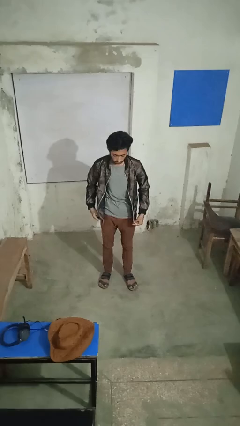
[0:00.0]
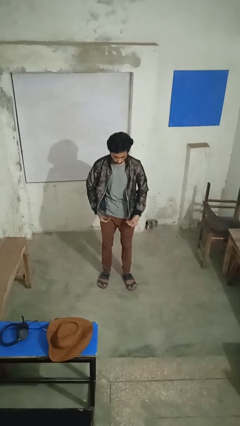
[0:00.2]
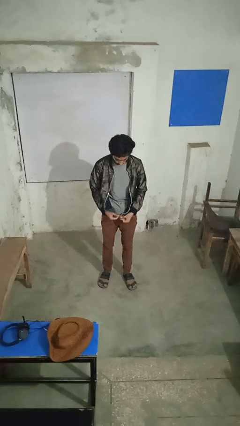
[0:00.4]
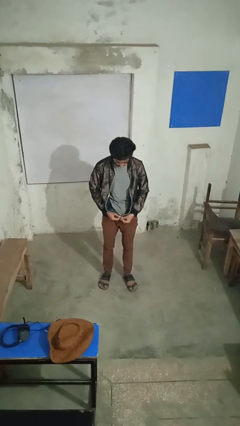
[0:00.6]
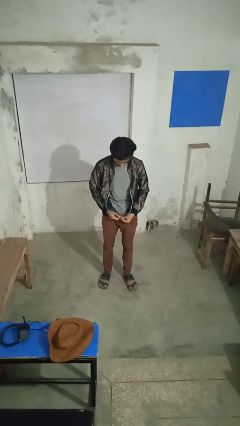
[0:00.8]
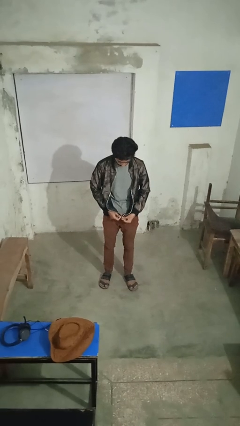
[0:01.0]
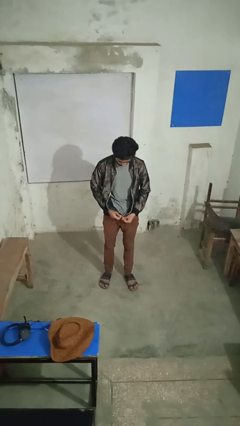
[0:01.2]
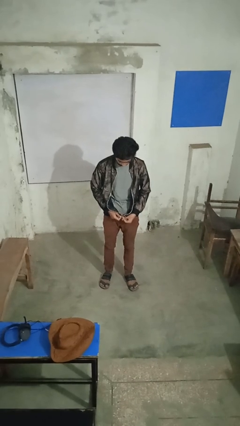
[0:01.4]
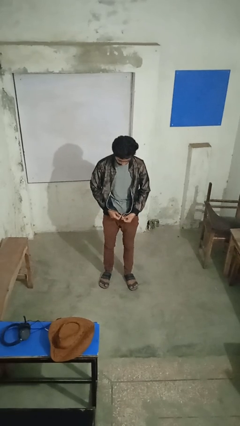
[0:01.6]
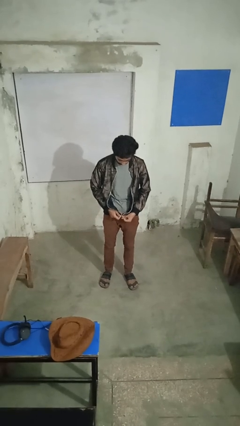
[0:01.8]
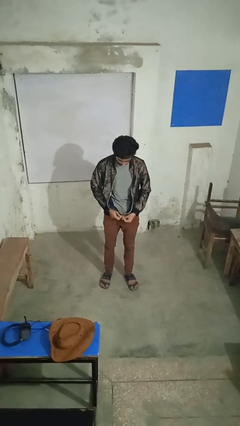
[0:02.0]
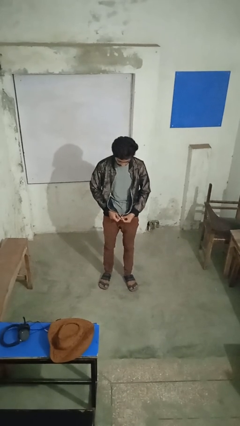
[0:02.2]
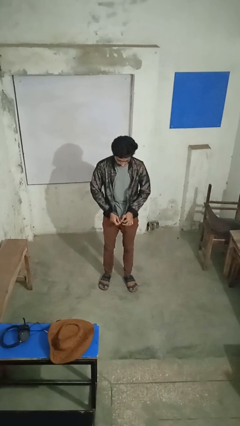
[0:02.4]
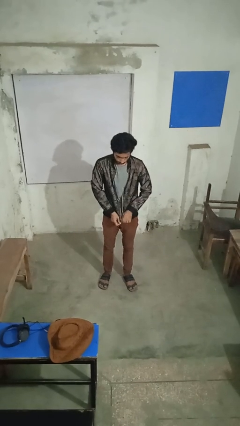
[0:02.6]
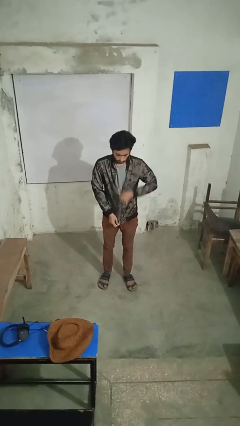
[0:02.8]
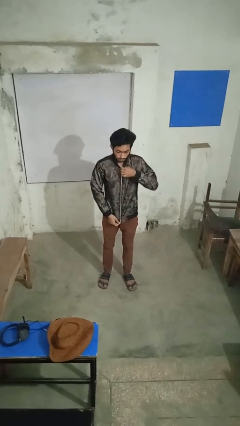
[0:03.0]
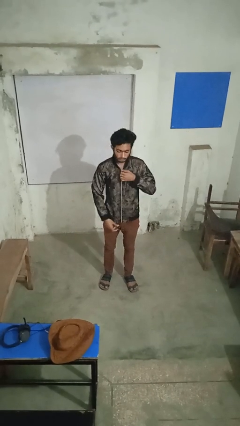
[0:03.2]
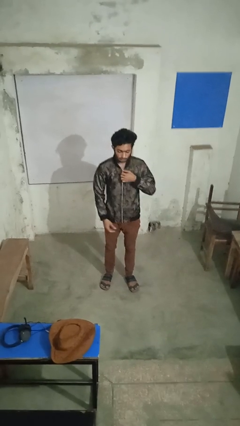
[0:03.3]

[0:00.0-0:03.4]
person zips up jacket

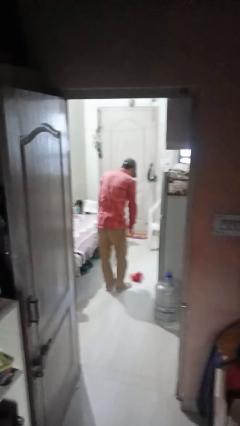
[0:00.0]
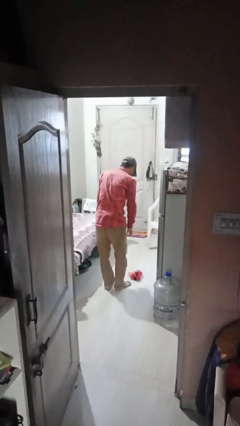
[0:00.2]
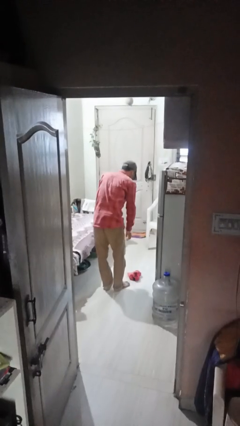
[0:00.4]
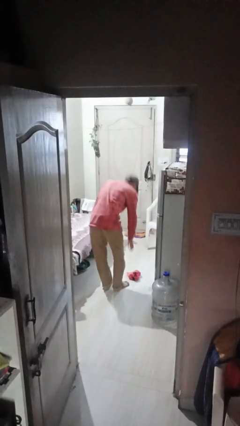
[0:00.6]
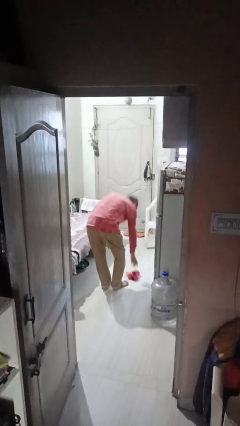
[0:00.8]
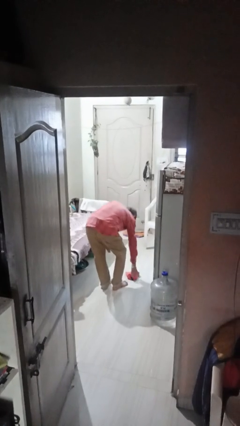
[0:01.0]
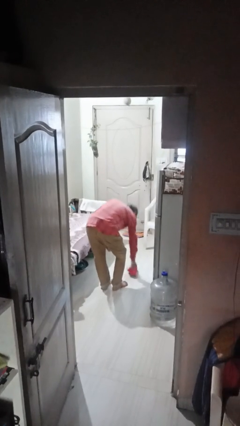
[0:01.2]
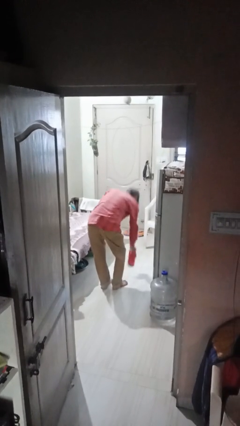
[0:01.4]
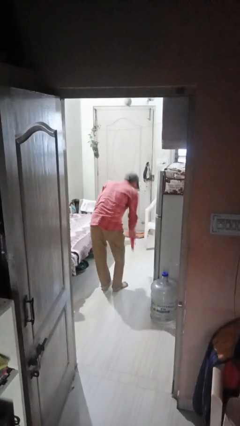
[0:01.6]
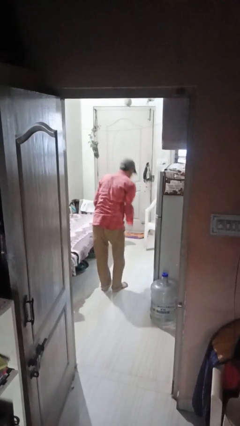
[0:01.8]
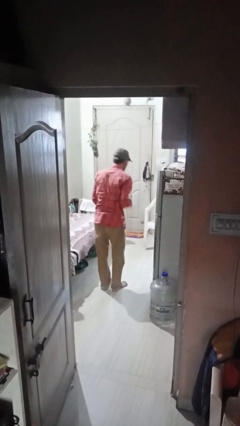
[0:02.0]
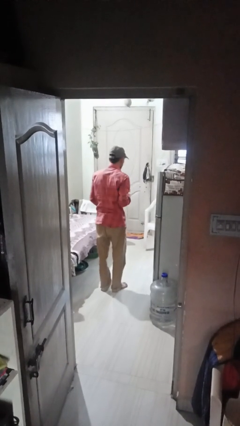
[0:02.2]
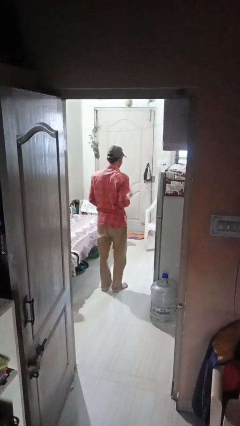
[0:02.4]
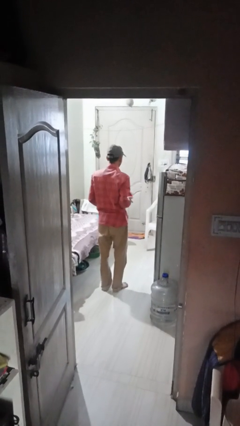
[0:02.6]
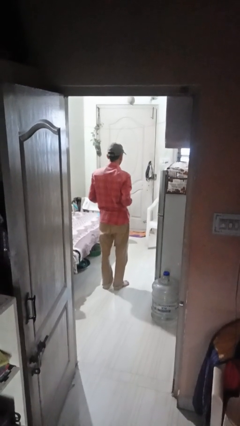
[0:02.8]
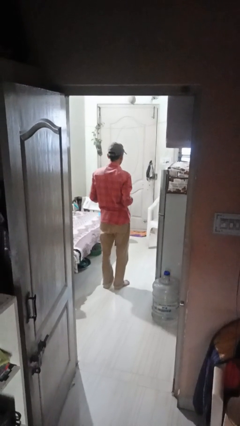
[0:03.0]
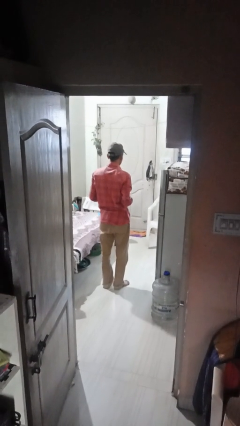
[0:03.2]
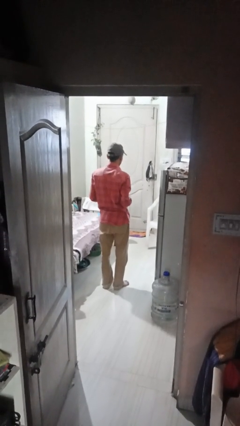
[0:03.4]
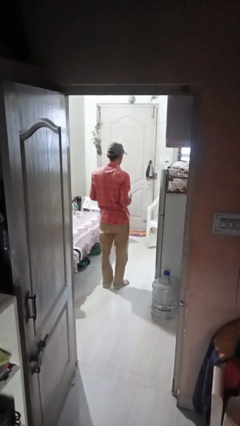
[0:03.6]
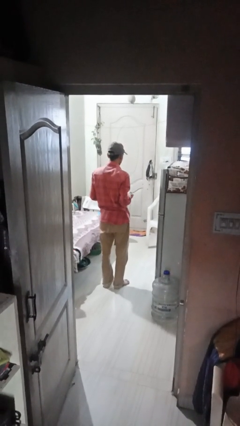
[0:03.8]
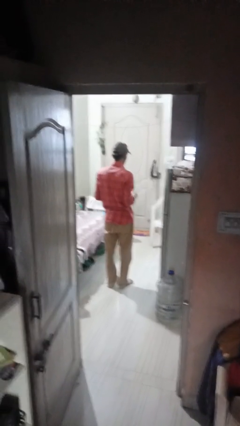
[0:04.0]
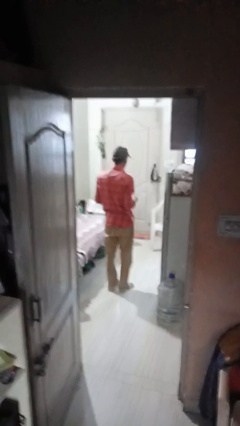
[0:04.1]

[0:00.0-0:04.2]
person picks up object from floor

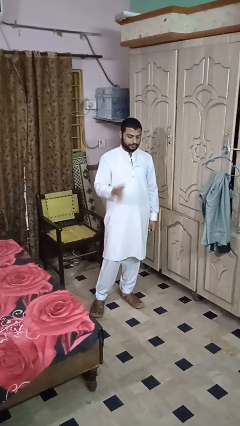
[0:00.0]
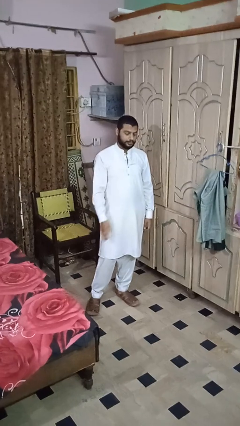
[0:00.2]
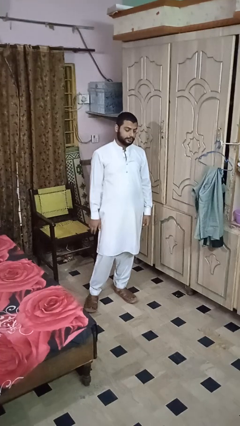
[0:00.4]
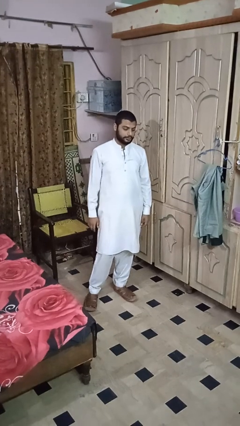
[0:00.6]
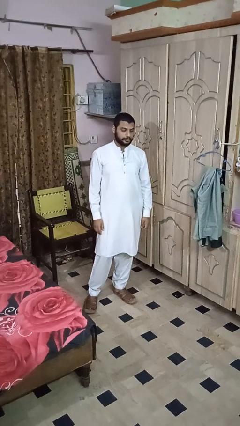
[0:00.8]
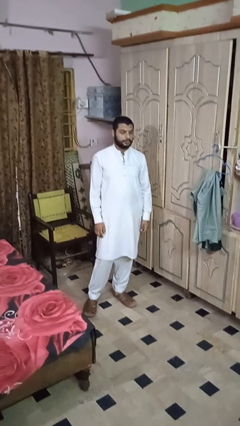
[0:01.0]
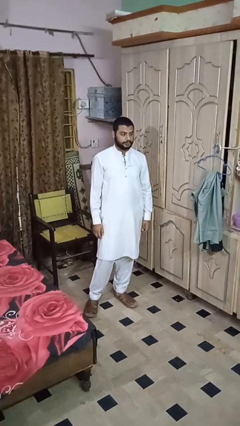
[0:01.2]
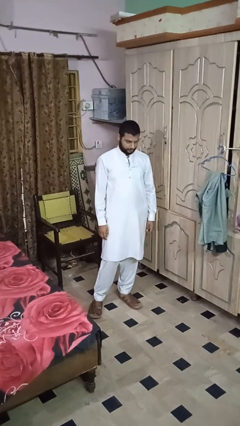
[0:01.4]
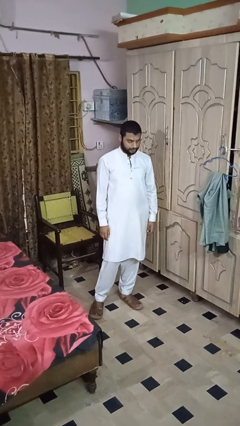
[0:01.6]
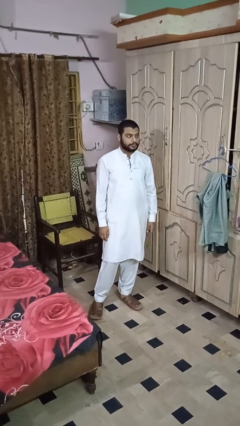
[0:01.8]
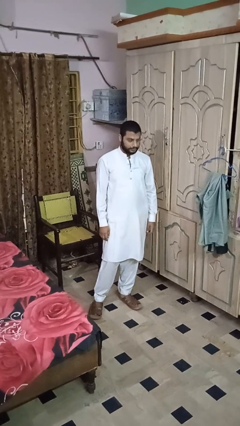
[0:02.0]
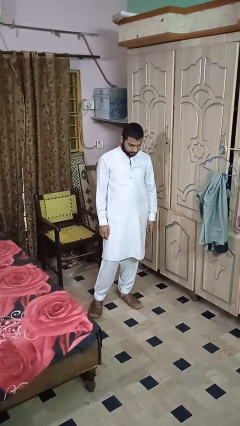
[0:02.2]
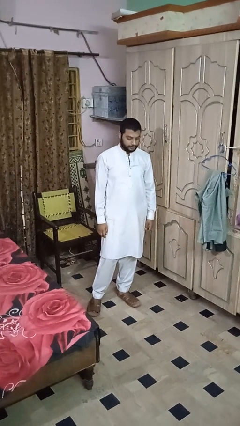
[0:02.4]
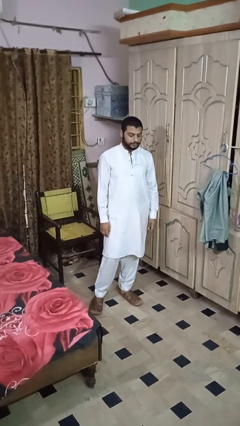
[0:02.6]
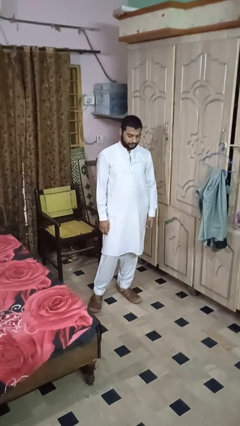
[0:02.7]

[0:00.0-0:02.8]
person nods head

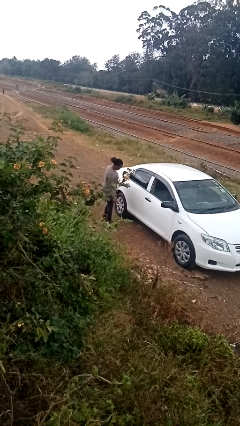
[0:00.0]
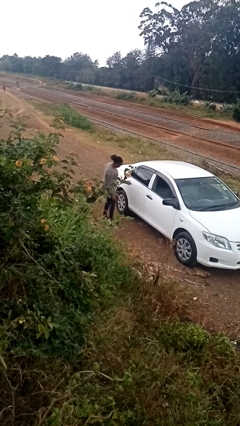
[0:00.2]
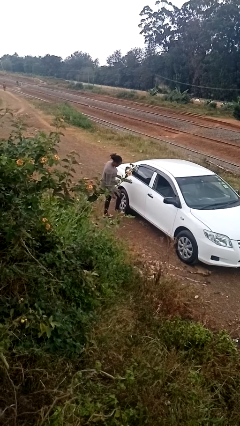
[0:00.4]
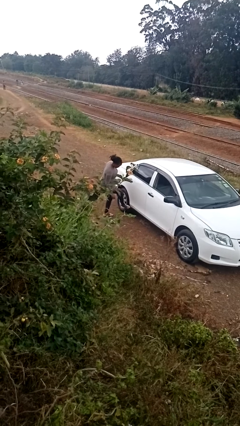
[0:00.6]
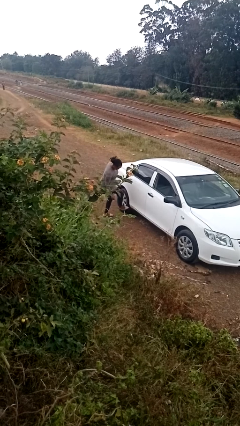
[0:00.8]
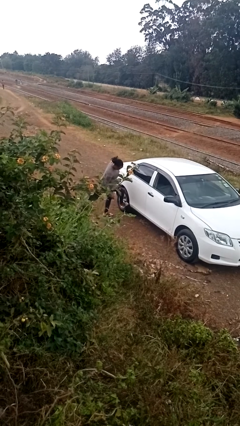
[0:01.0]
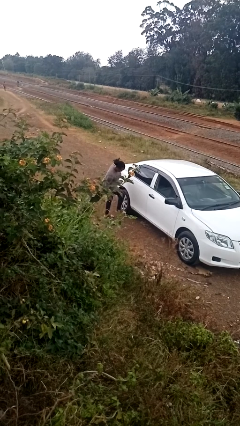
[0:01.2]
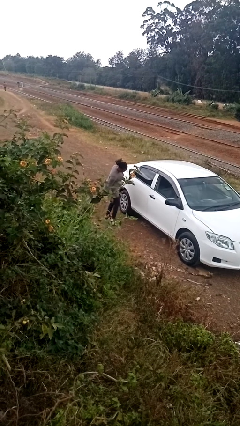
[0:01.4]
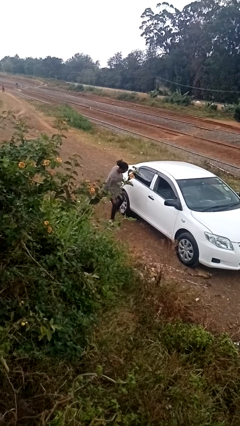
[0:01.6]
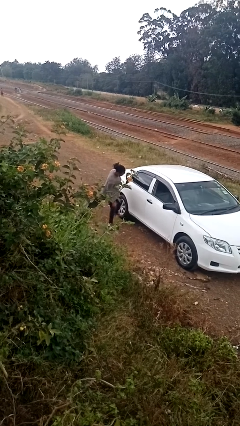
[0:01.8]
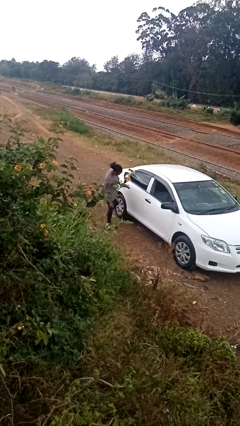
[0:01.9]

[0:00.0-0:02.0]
person kicks car tires

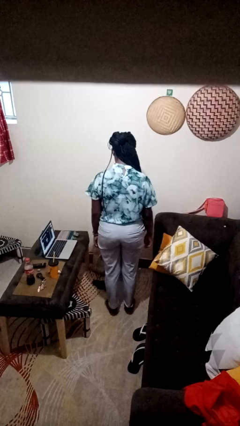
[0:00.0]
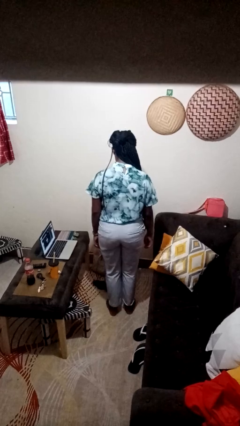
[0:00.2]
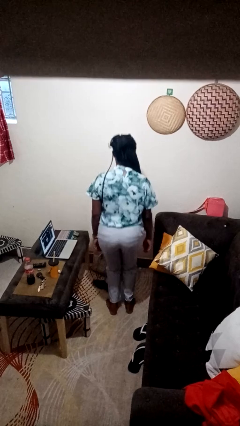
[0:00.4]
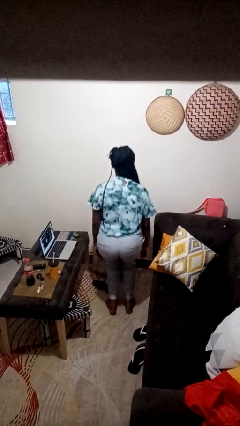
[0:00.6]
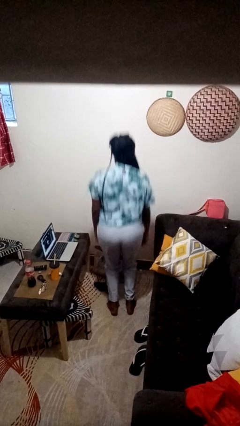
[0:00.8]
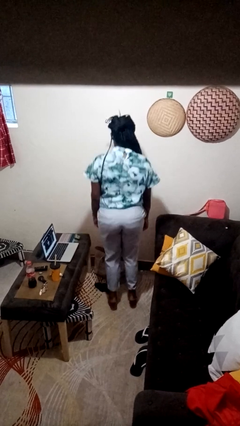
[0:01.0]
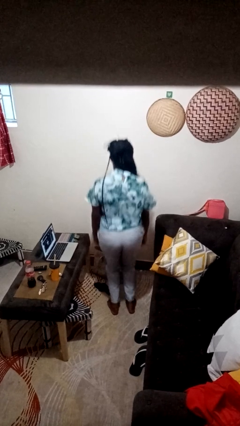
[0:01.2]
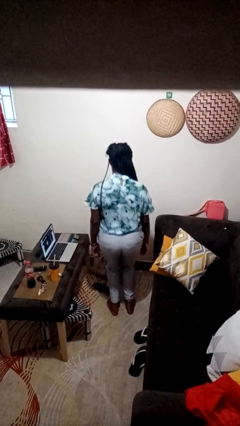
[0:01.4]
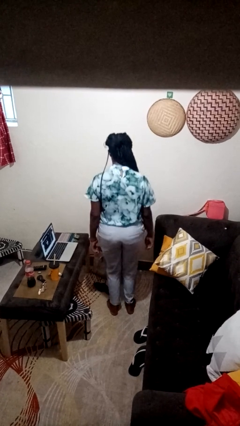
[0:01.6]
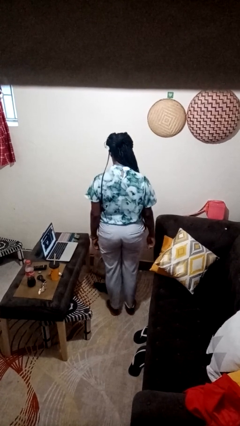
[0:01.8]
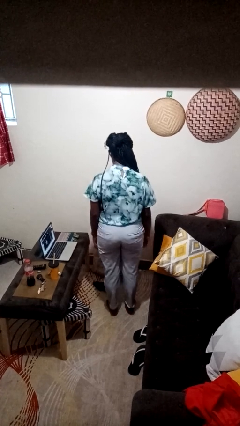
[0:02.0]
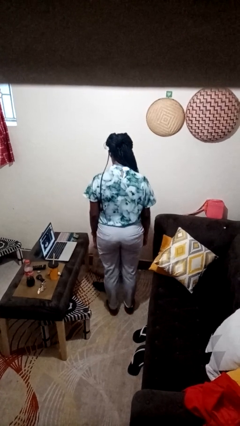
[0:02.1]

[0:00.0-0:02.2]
person jumps

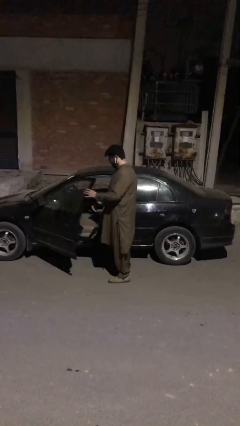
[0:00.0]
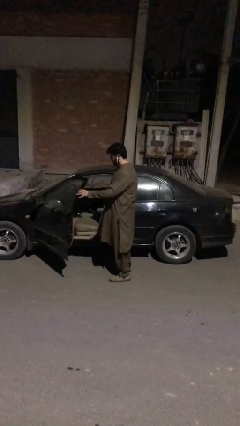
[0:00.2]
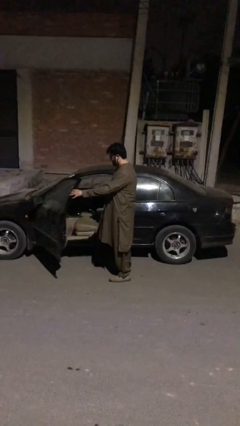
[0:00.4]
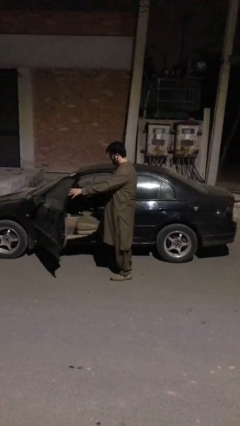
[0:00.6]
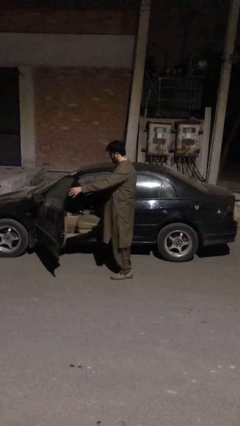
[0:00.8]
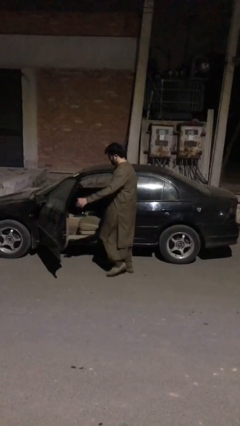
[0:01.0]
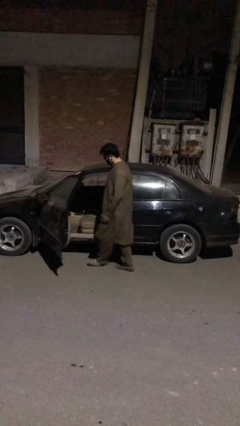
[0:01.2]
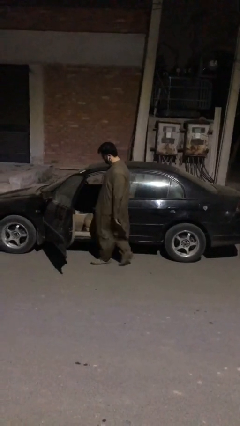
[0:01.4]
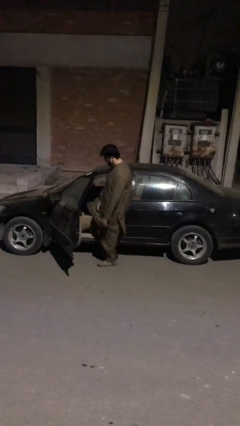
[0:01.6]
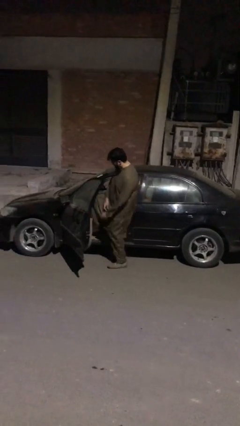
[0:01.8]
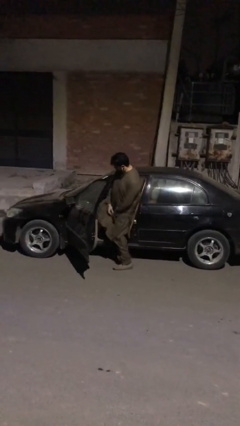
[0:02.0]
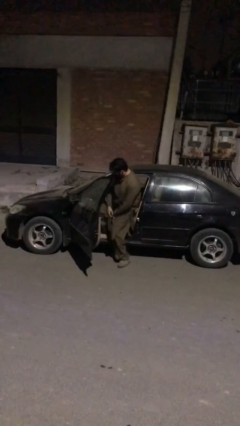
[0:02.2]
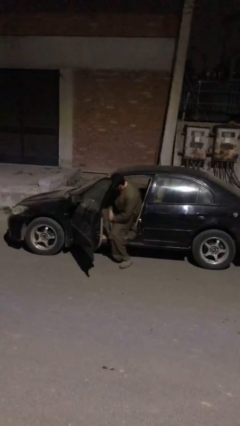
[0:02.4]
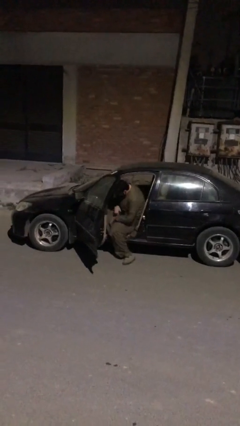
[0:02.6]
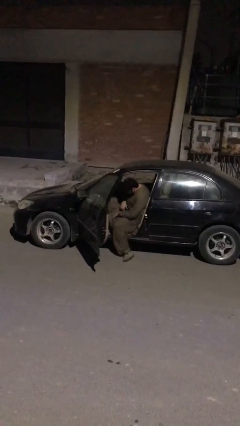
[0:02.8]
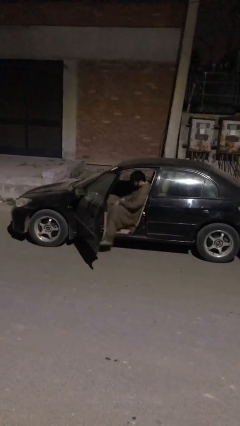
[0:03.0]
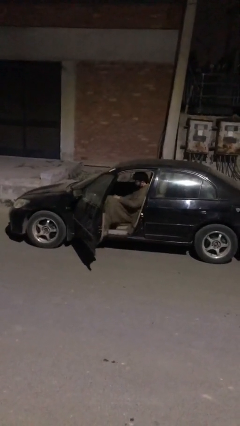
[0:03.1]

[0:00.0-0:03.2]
person enters car
